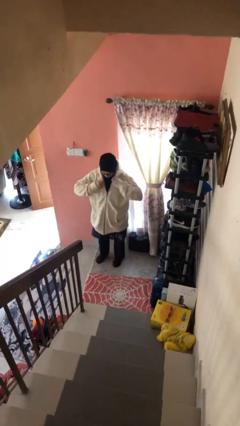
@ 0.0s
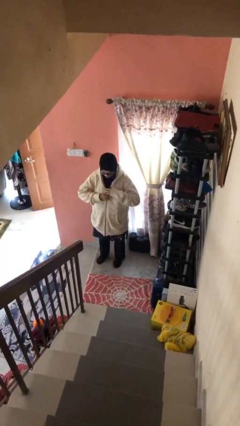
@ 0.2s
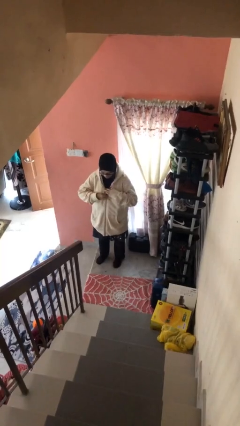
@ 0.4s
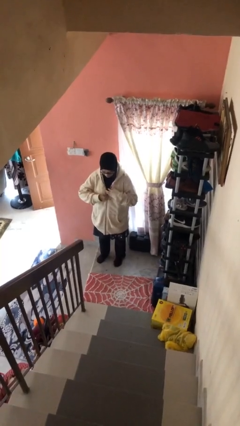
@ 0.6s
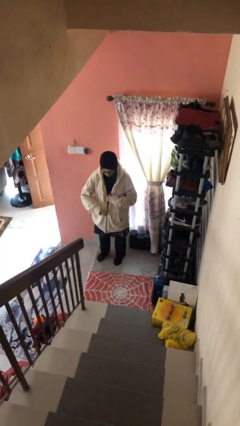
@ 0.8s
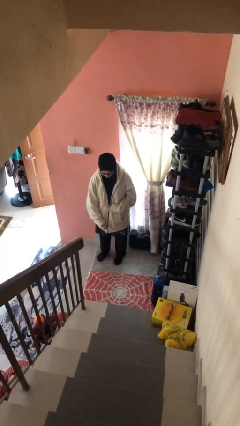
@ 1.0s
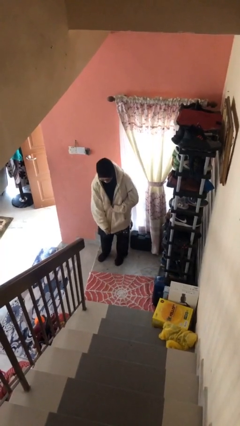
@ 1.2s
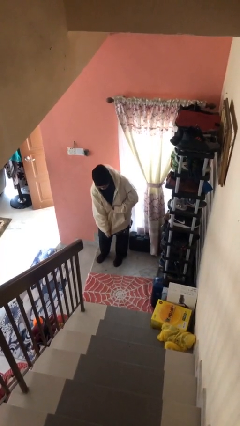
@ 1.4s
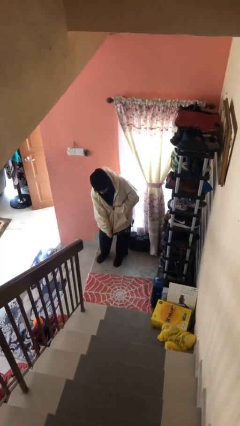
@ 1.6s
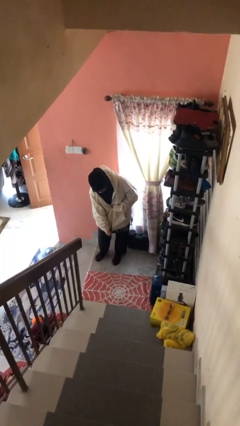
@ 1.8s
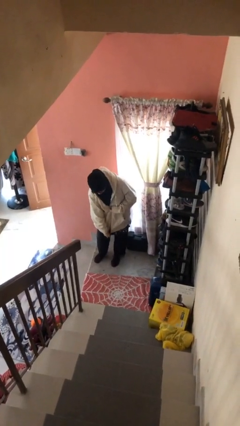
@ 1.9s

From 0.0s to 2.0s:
person unzips jacket

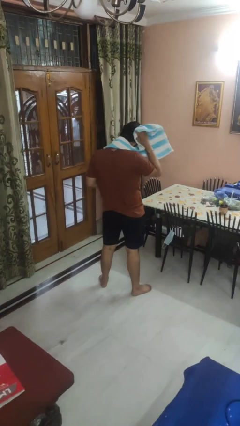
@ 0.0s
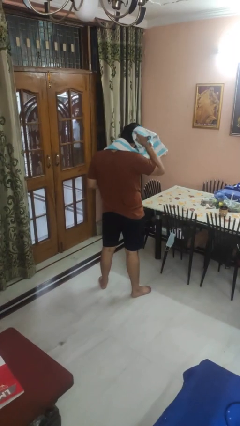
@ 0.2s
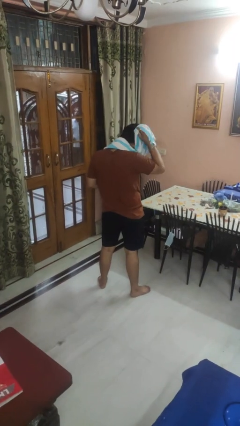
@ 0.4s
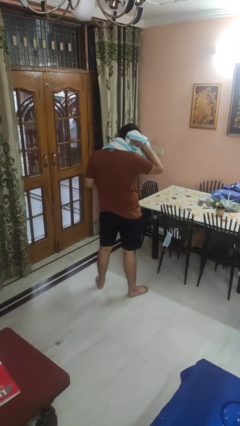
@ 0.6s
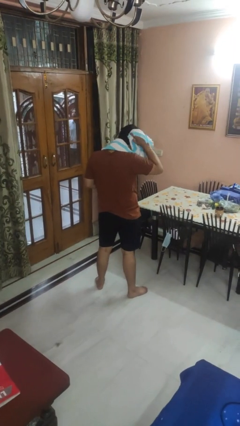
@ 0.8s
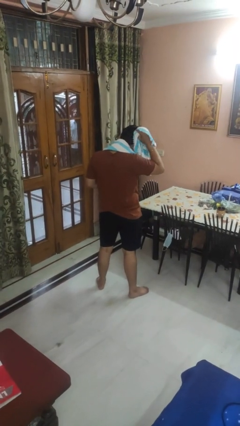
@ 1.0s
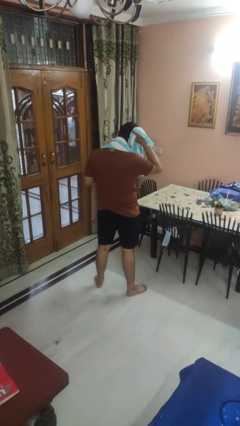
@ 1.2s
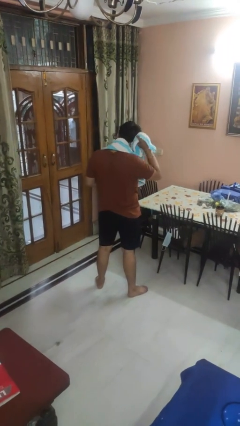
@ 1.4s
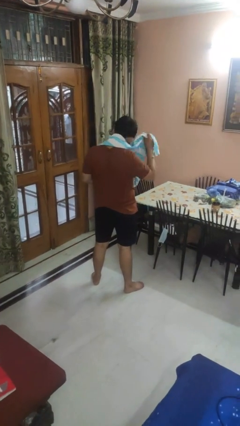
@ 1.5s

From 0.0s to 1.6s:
person dries hair with towel

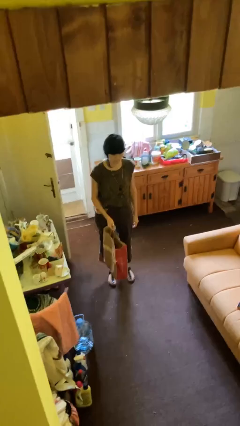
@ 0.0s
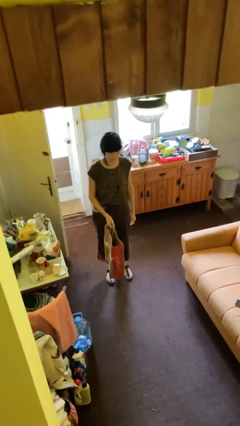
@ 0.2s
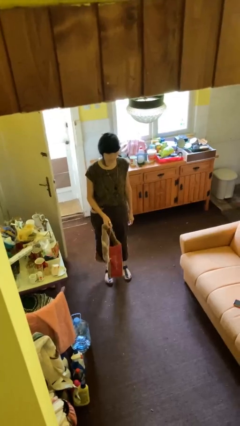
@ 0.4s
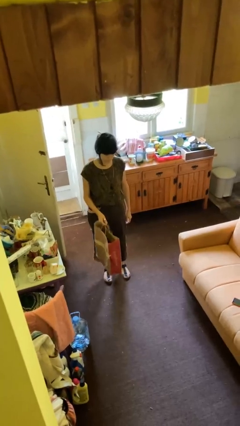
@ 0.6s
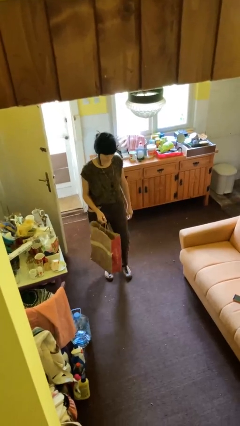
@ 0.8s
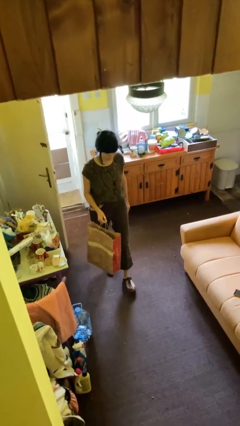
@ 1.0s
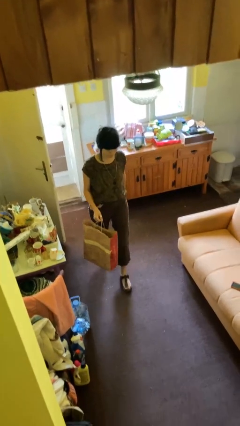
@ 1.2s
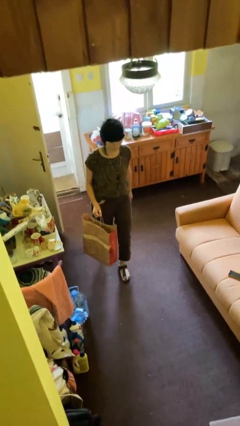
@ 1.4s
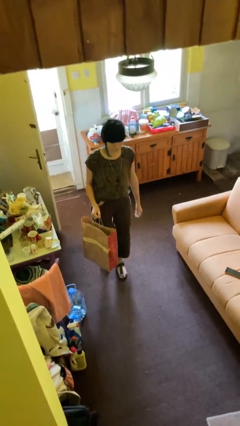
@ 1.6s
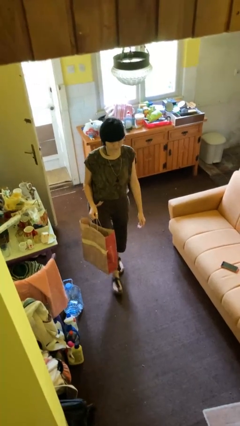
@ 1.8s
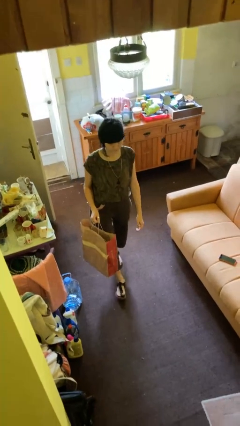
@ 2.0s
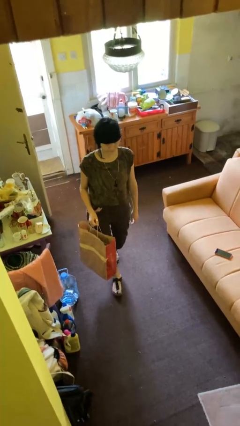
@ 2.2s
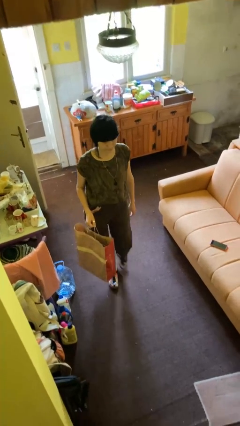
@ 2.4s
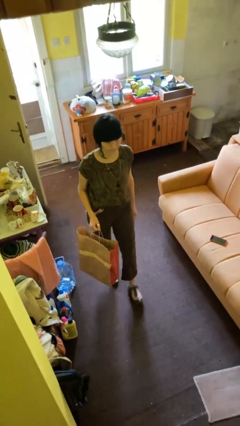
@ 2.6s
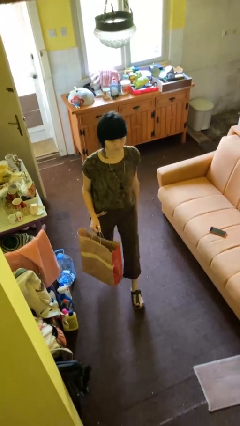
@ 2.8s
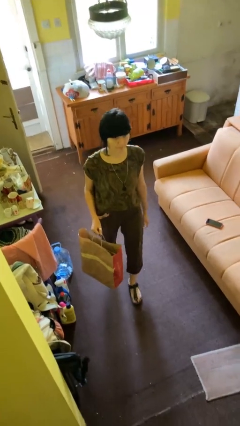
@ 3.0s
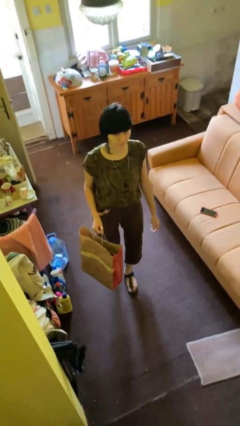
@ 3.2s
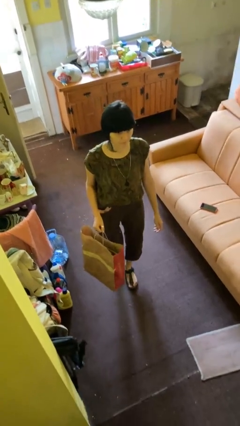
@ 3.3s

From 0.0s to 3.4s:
person carries groceries

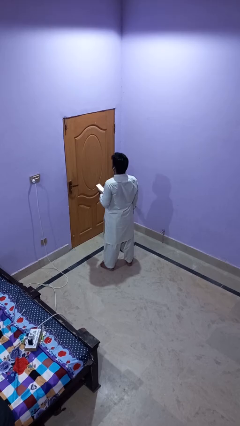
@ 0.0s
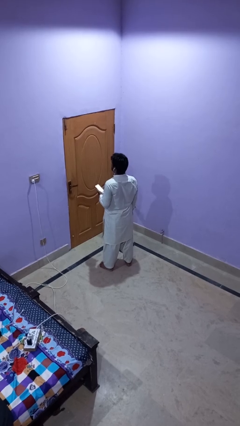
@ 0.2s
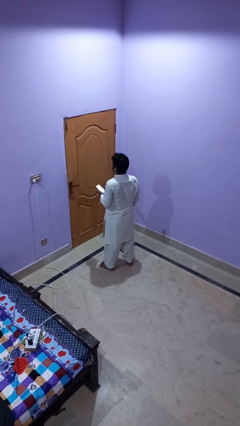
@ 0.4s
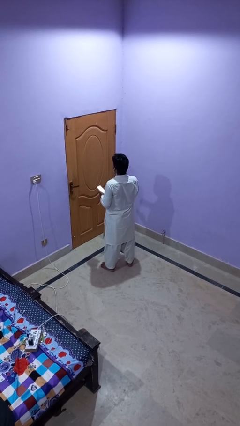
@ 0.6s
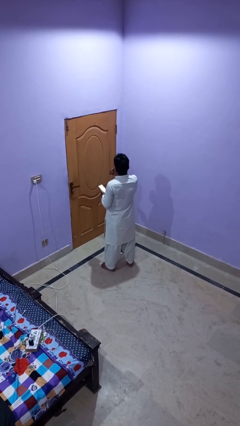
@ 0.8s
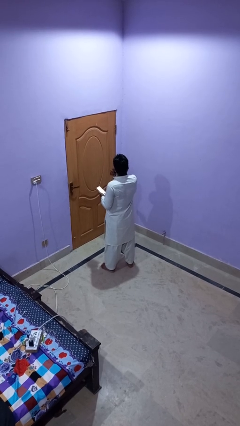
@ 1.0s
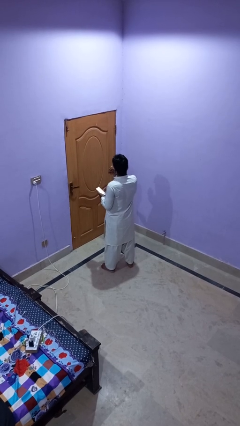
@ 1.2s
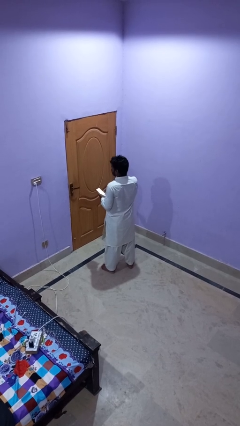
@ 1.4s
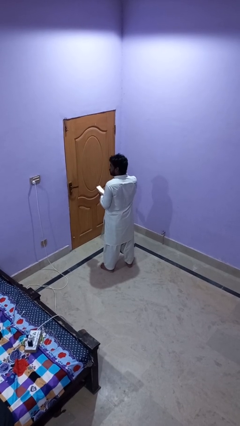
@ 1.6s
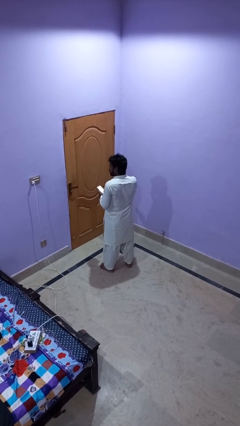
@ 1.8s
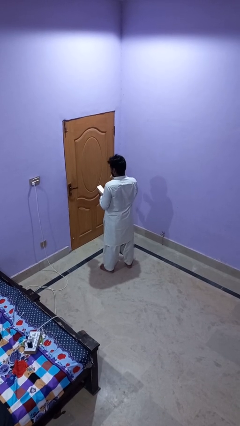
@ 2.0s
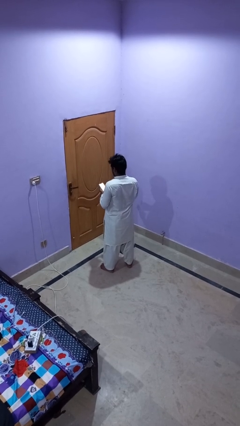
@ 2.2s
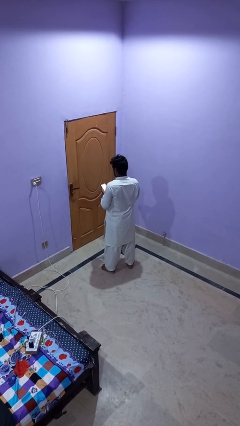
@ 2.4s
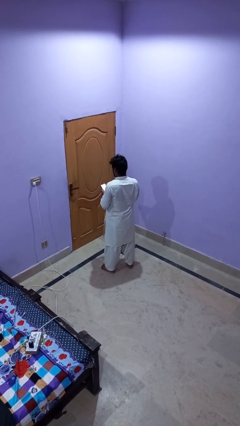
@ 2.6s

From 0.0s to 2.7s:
person takes off headphones

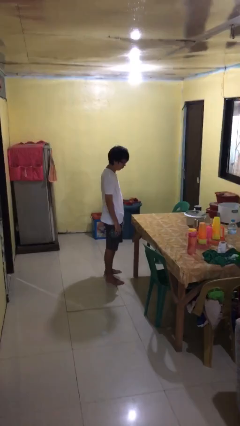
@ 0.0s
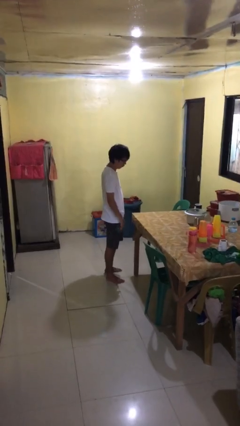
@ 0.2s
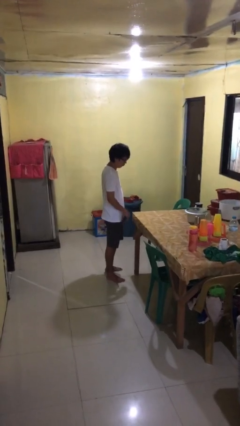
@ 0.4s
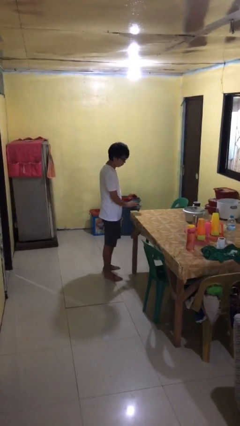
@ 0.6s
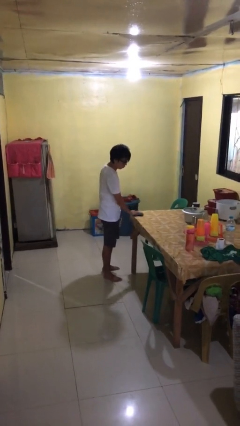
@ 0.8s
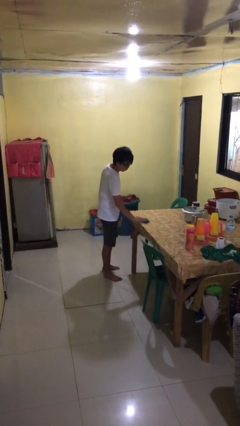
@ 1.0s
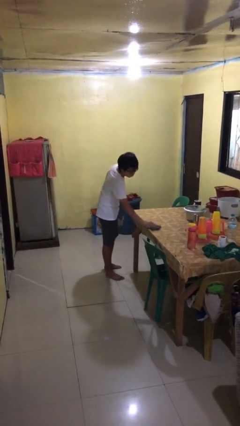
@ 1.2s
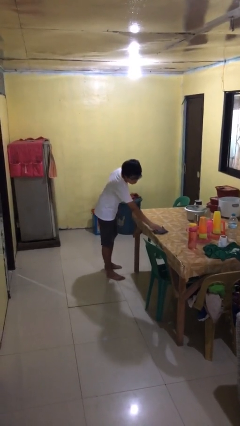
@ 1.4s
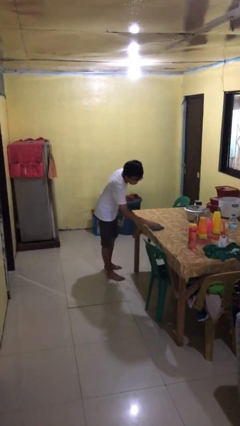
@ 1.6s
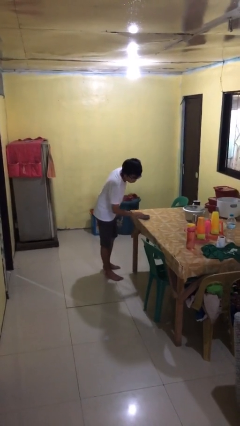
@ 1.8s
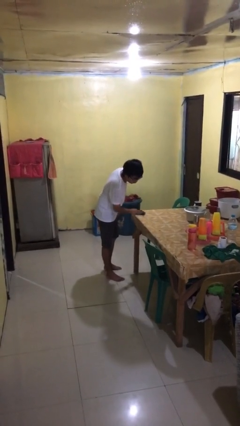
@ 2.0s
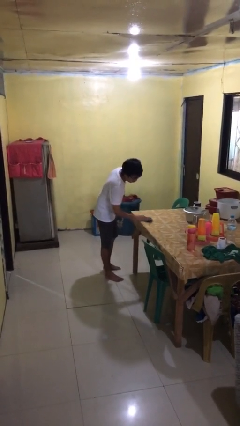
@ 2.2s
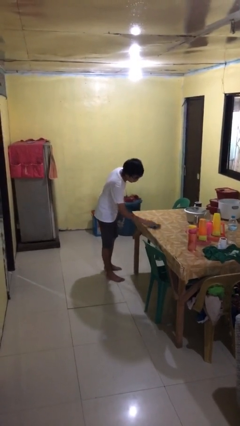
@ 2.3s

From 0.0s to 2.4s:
person cleans table with rag

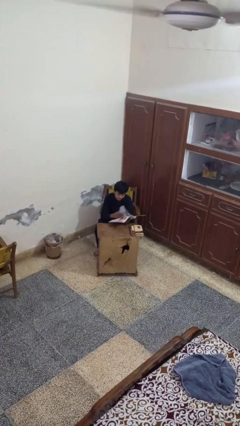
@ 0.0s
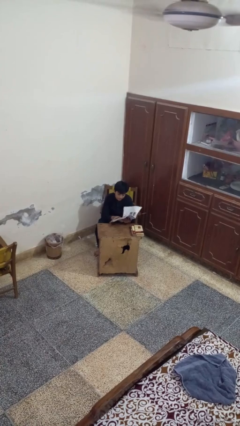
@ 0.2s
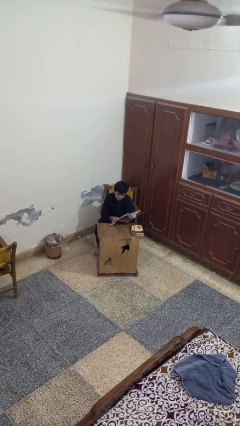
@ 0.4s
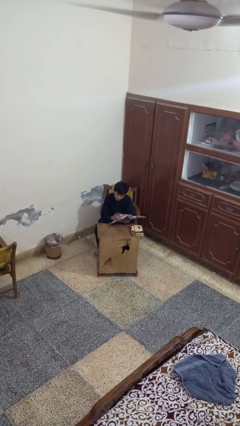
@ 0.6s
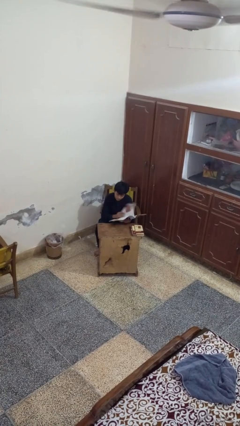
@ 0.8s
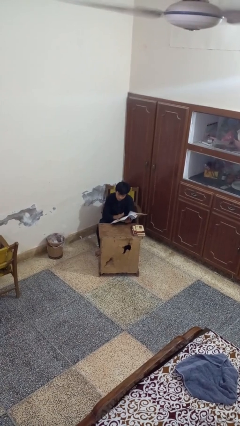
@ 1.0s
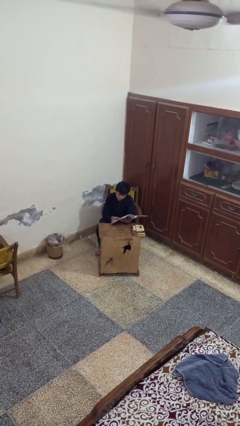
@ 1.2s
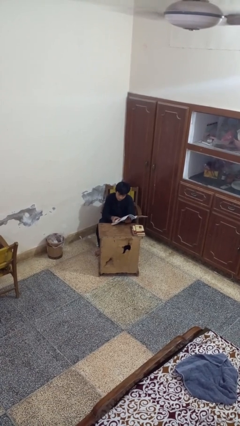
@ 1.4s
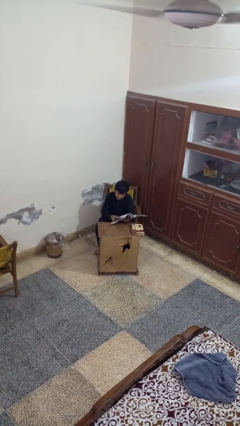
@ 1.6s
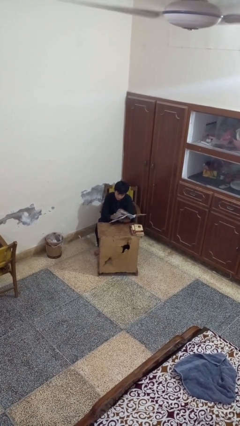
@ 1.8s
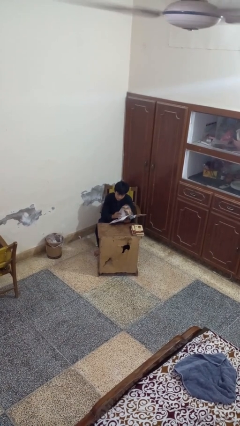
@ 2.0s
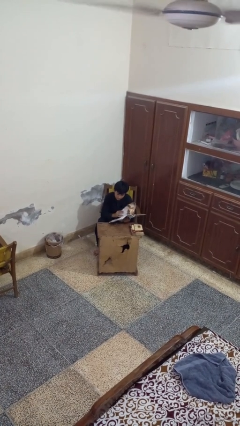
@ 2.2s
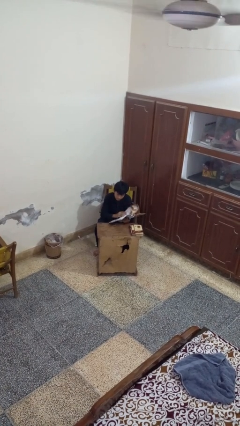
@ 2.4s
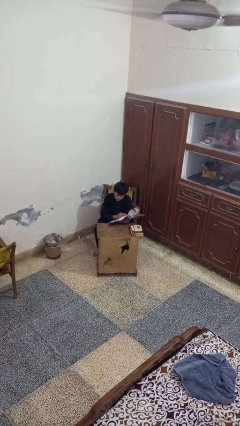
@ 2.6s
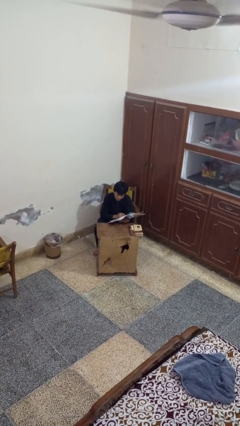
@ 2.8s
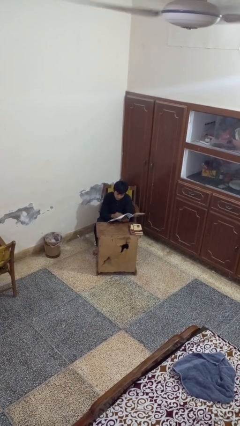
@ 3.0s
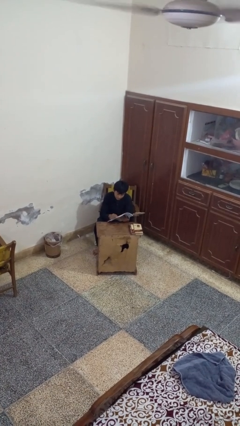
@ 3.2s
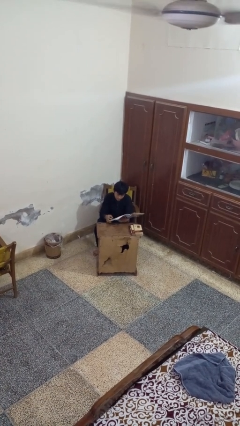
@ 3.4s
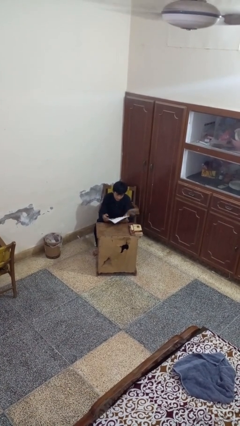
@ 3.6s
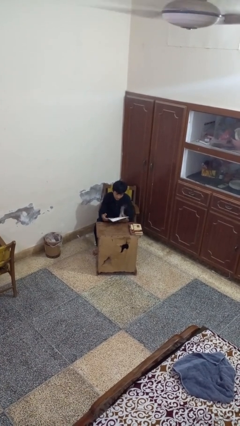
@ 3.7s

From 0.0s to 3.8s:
person reads magazine

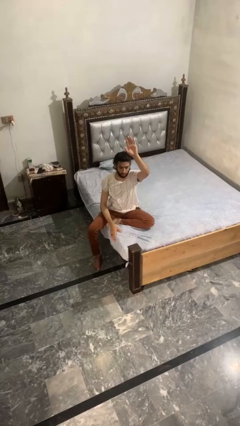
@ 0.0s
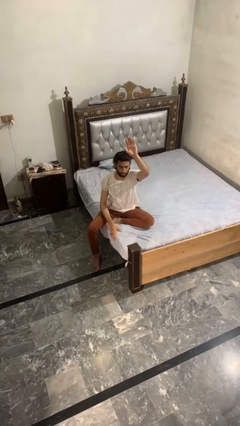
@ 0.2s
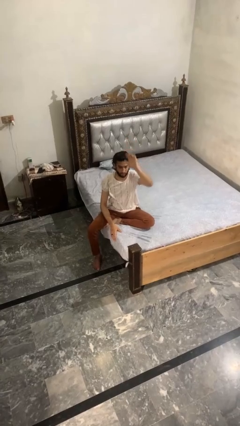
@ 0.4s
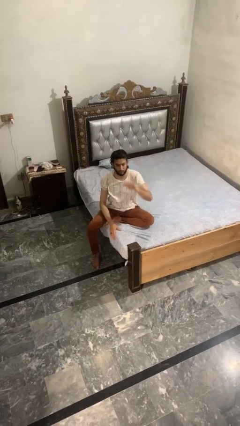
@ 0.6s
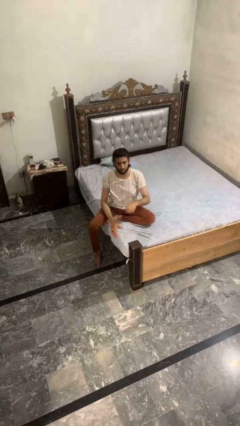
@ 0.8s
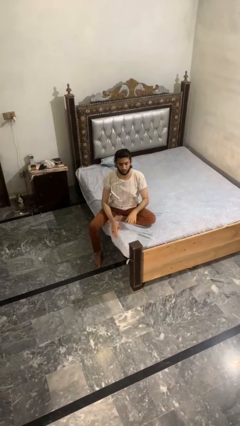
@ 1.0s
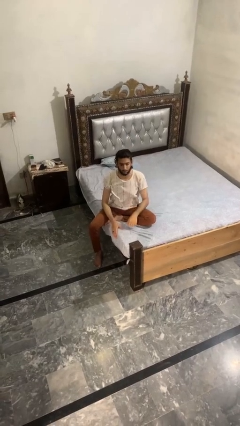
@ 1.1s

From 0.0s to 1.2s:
person gestures lower hand
